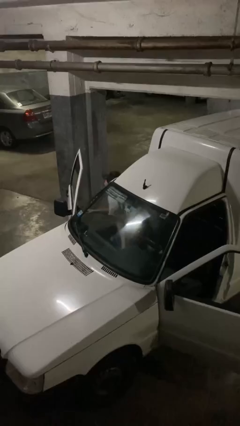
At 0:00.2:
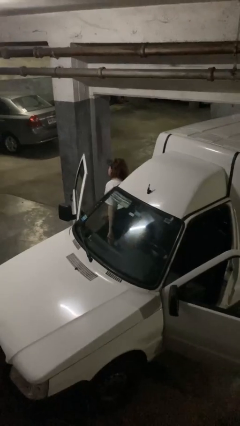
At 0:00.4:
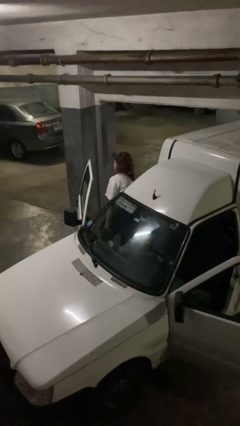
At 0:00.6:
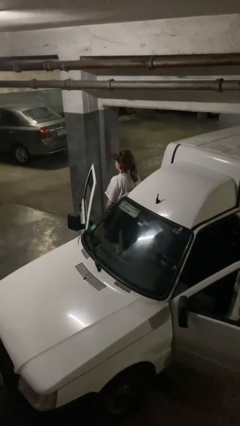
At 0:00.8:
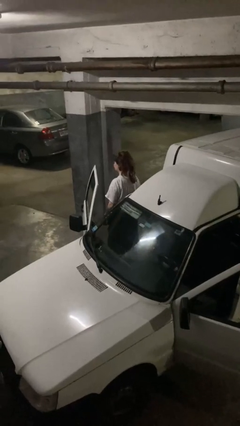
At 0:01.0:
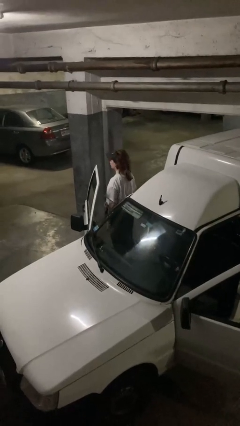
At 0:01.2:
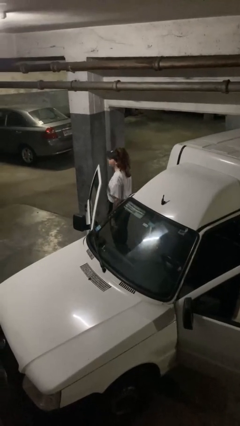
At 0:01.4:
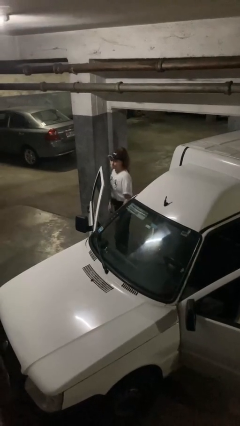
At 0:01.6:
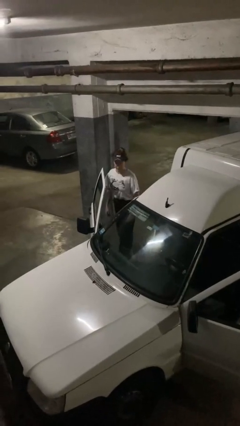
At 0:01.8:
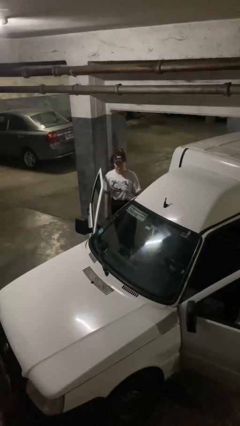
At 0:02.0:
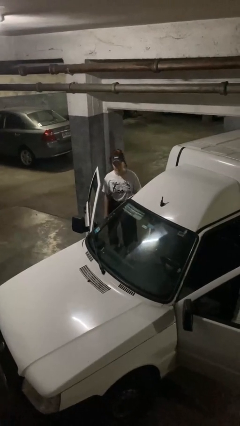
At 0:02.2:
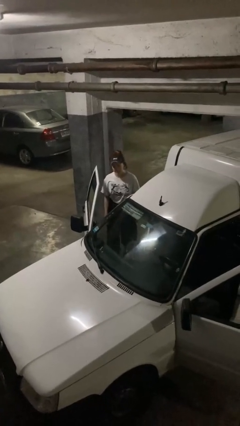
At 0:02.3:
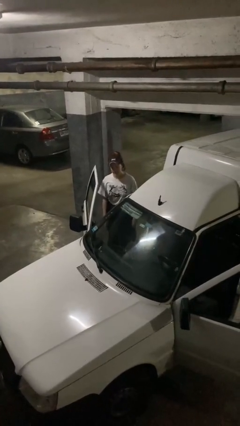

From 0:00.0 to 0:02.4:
person exits car

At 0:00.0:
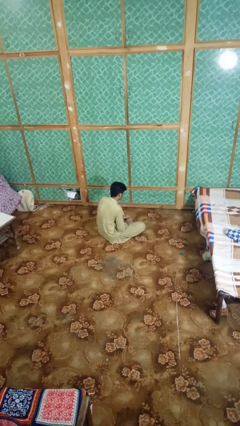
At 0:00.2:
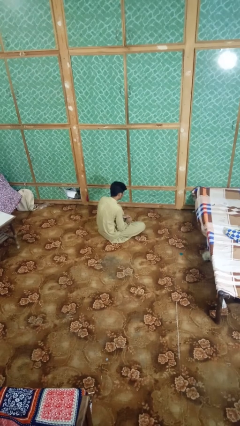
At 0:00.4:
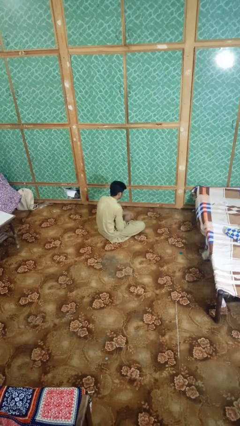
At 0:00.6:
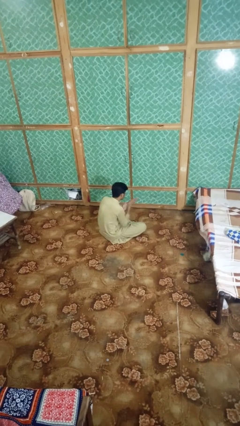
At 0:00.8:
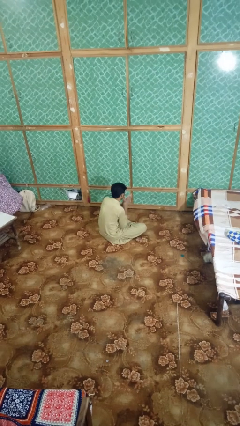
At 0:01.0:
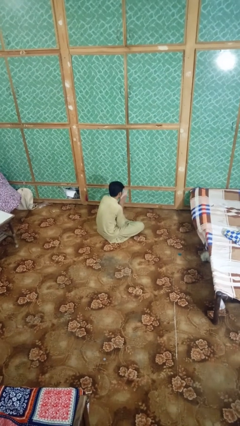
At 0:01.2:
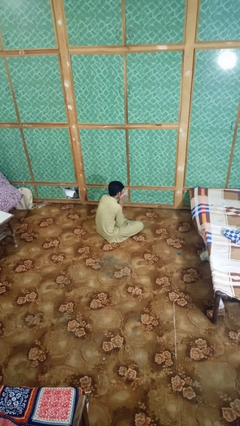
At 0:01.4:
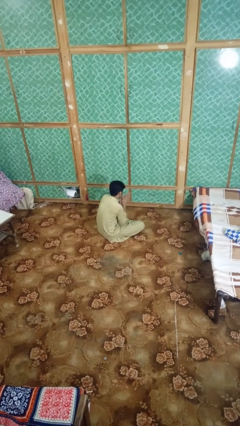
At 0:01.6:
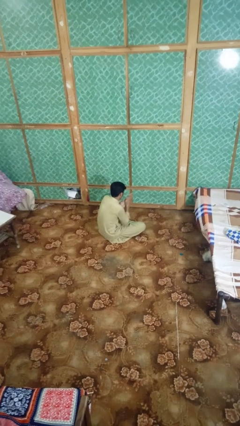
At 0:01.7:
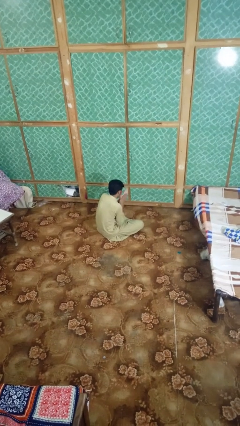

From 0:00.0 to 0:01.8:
person blows into hands

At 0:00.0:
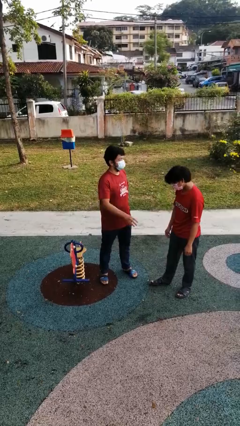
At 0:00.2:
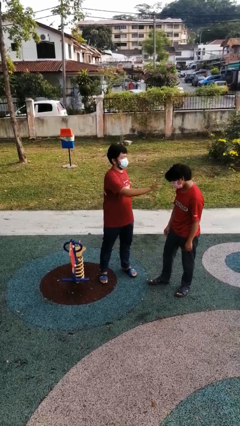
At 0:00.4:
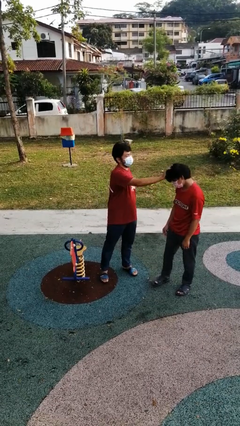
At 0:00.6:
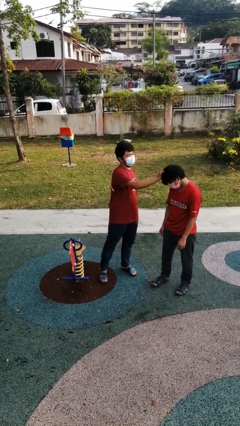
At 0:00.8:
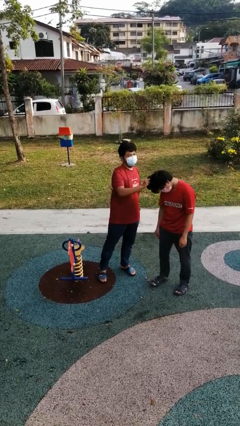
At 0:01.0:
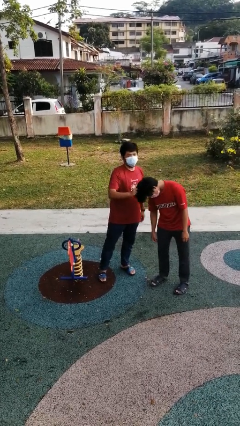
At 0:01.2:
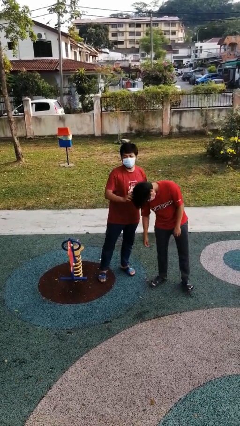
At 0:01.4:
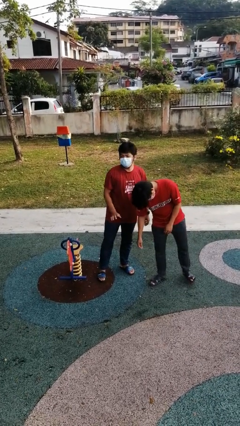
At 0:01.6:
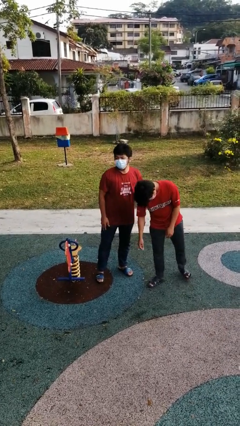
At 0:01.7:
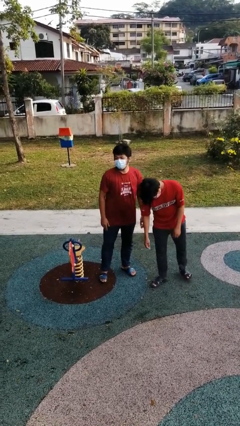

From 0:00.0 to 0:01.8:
person grabs person by hair

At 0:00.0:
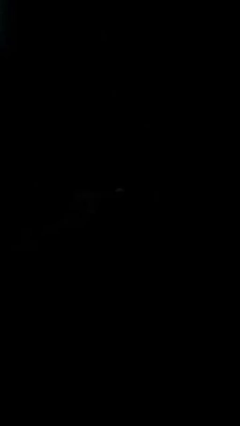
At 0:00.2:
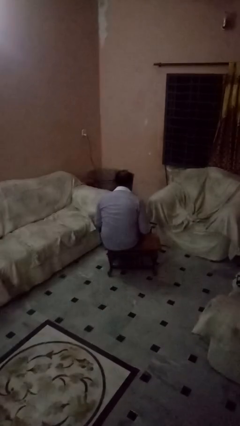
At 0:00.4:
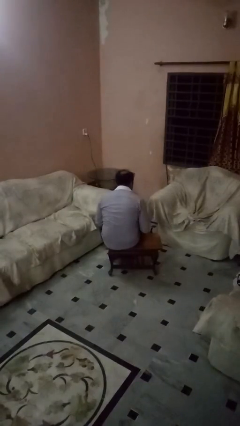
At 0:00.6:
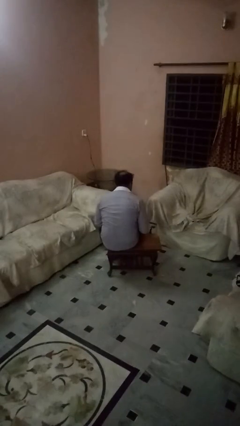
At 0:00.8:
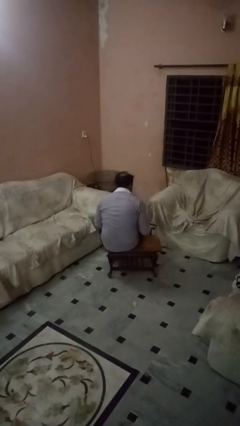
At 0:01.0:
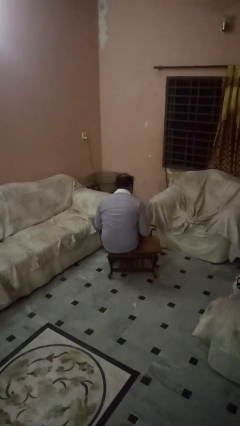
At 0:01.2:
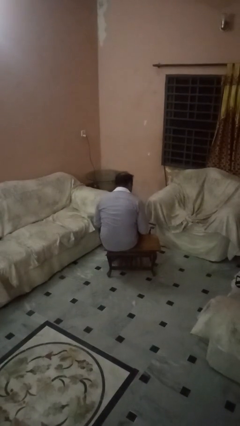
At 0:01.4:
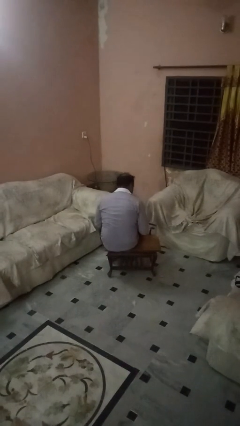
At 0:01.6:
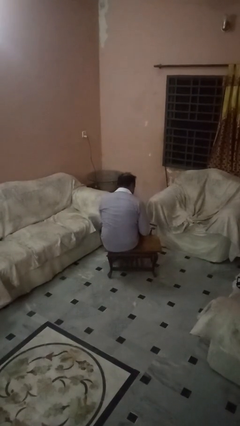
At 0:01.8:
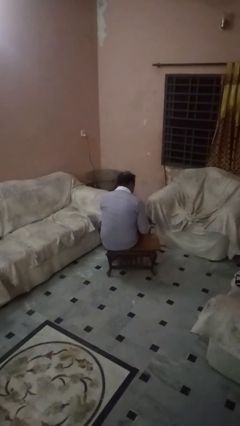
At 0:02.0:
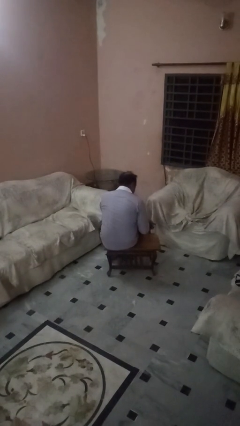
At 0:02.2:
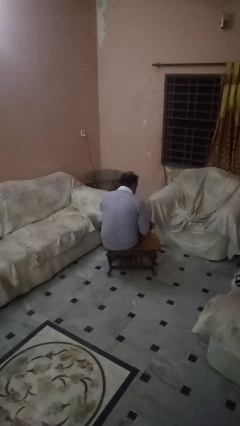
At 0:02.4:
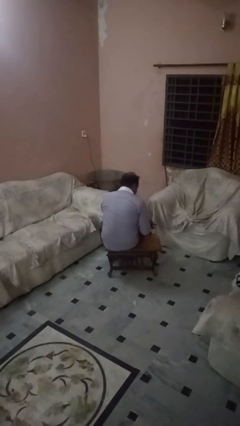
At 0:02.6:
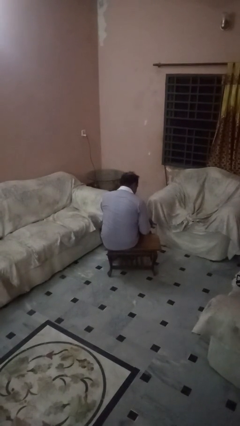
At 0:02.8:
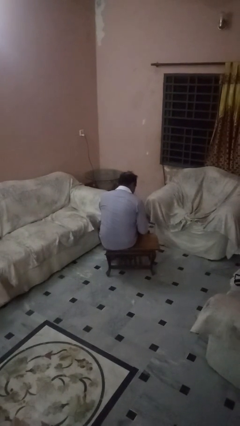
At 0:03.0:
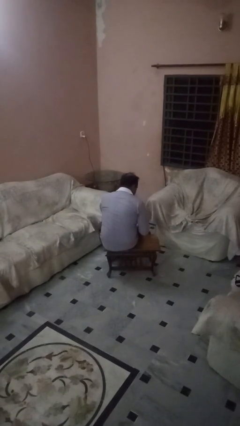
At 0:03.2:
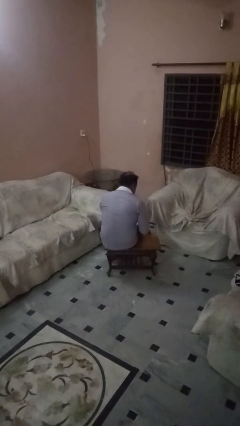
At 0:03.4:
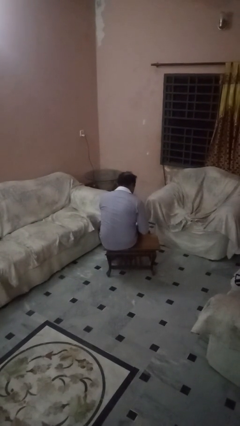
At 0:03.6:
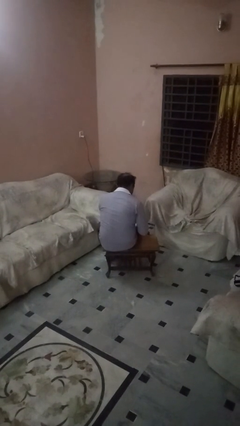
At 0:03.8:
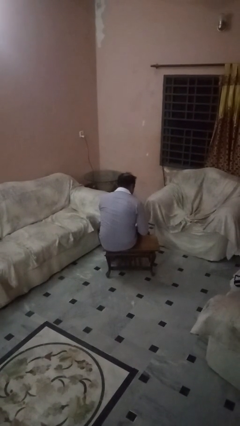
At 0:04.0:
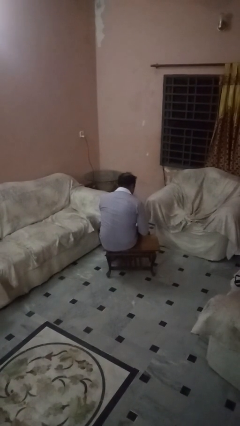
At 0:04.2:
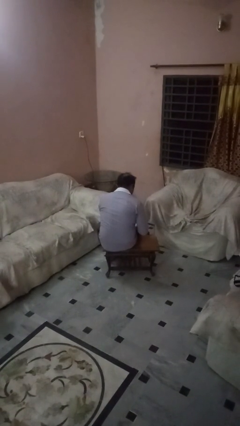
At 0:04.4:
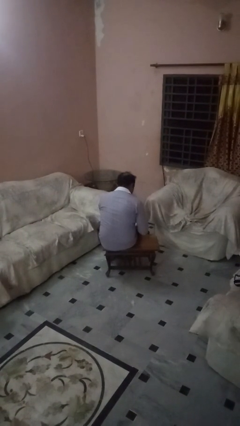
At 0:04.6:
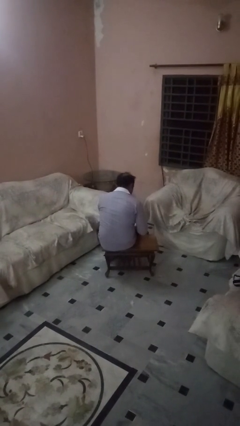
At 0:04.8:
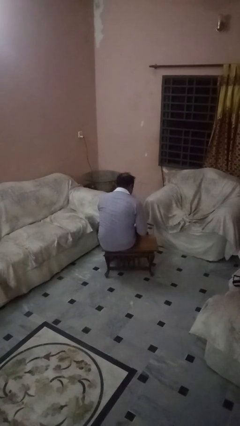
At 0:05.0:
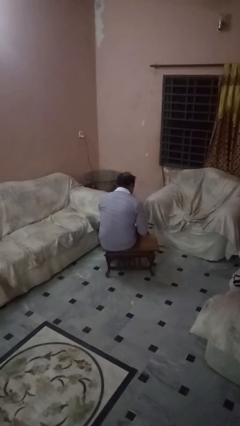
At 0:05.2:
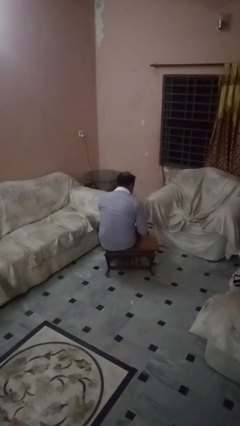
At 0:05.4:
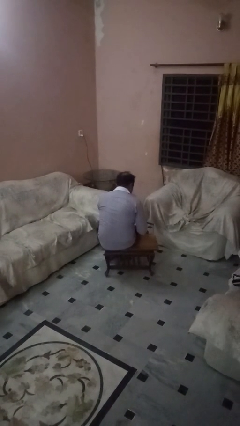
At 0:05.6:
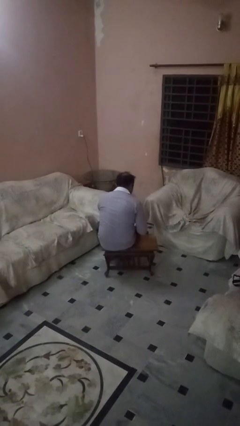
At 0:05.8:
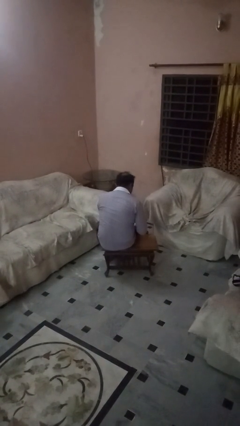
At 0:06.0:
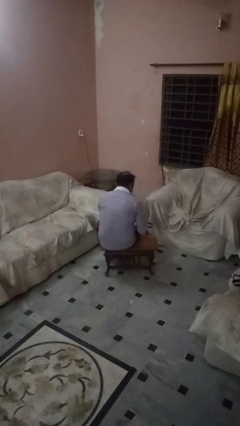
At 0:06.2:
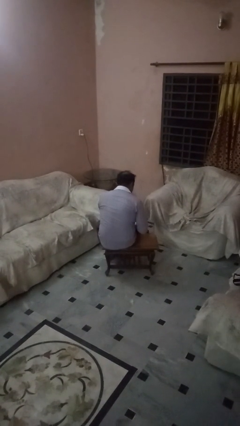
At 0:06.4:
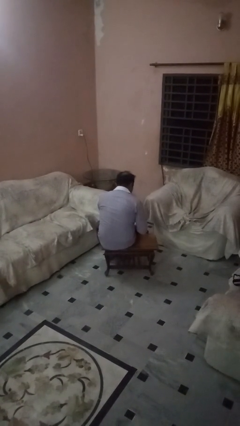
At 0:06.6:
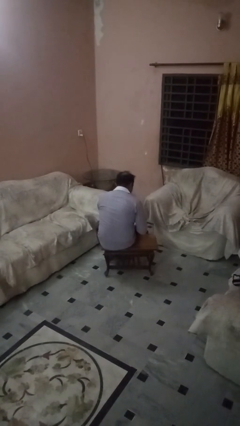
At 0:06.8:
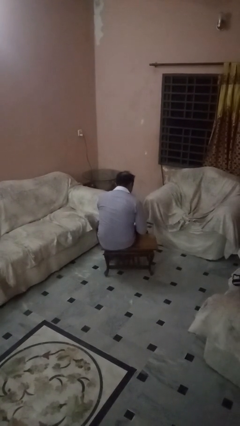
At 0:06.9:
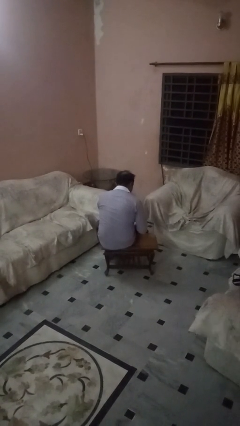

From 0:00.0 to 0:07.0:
person paints fingernails

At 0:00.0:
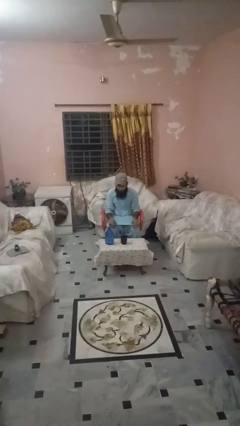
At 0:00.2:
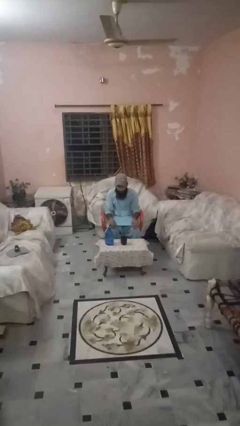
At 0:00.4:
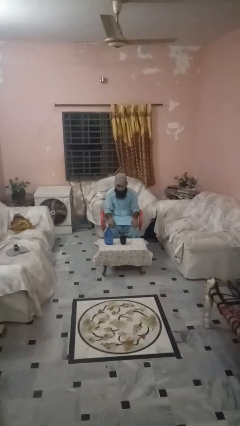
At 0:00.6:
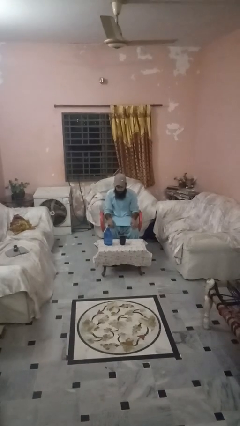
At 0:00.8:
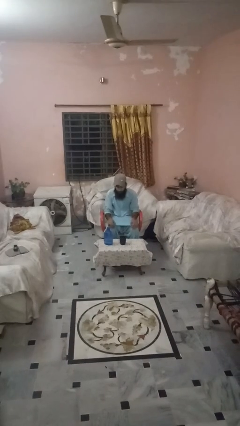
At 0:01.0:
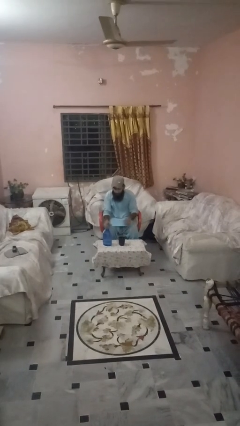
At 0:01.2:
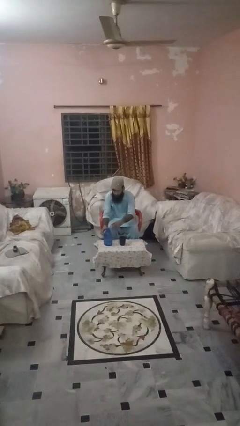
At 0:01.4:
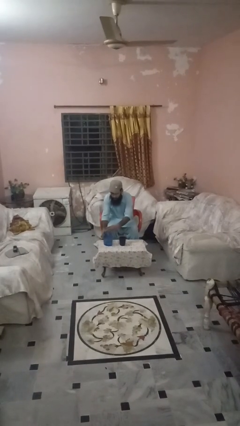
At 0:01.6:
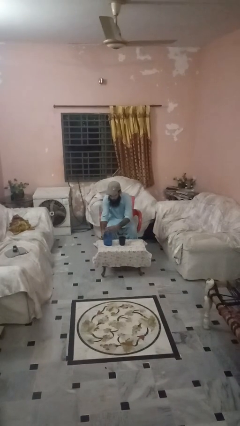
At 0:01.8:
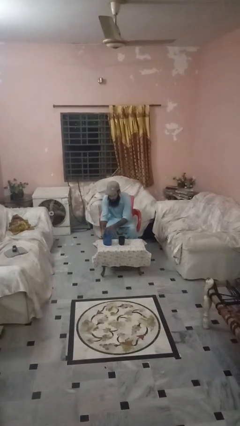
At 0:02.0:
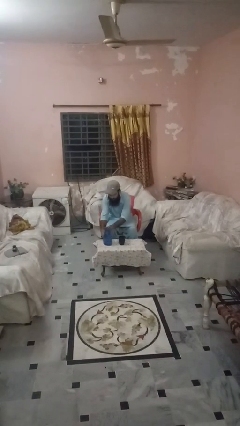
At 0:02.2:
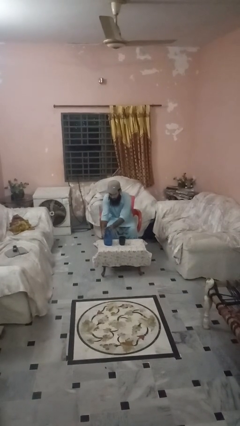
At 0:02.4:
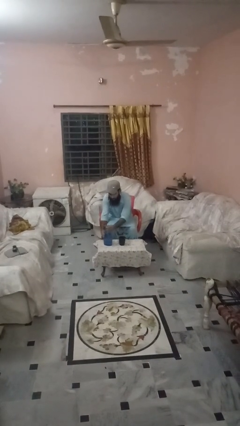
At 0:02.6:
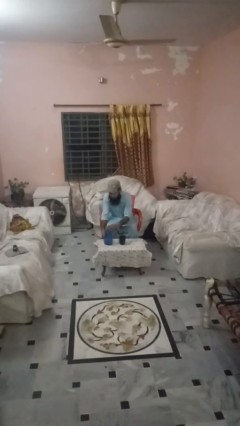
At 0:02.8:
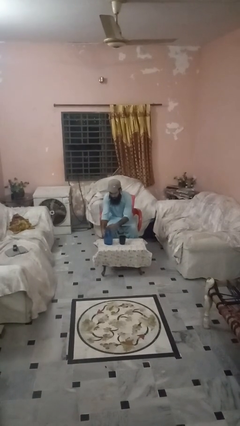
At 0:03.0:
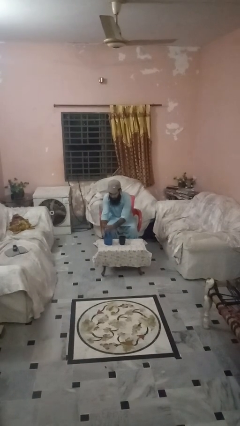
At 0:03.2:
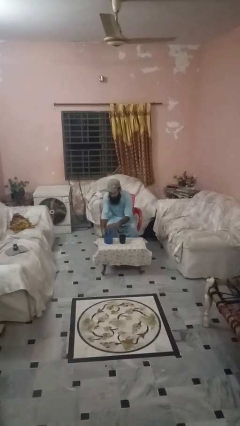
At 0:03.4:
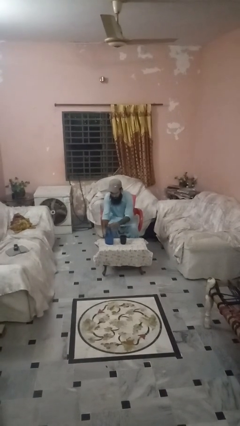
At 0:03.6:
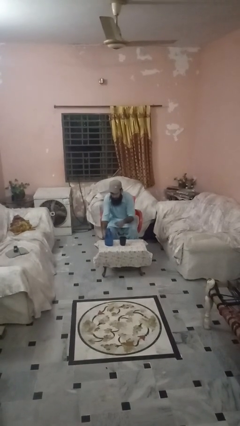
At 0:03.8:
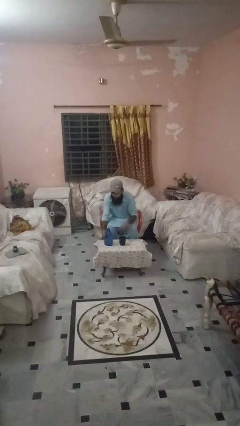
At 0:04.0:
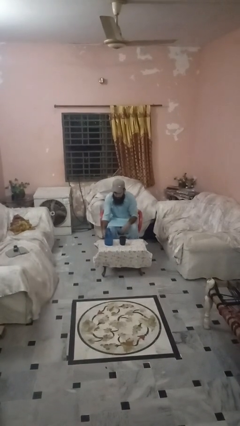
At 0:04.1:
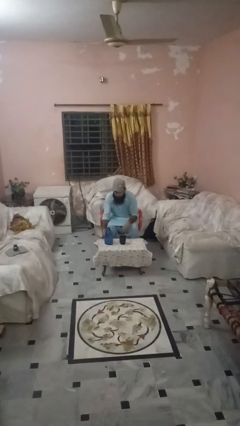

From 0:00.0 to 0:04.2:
person unscrews lid from bottle

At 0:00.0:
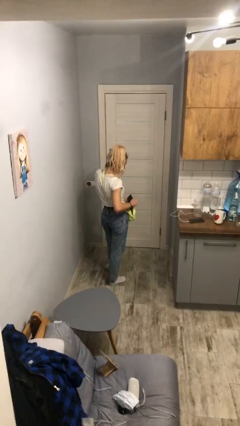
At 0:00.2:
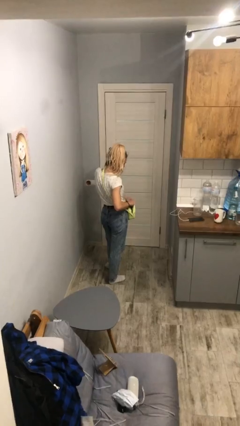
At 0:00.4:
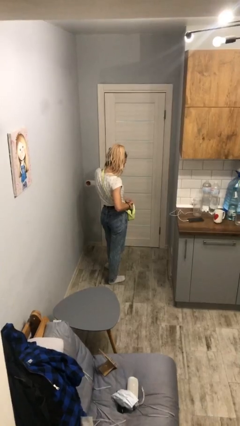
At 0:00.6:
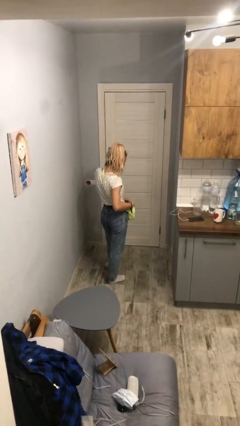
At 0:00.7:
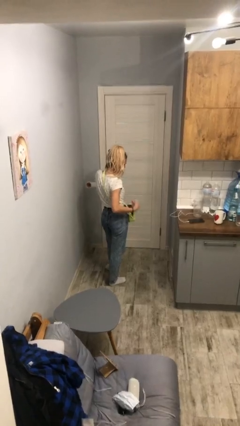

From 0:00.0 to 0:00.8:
person puts object into purse
